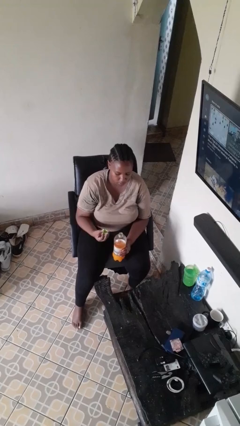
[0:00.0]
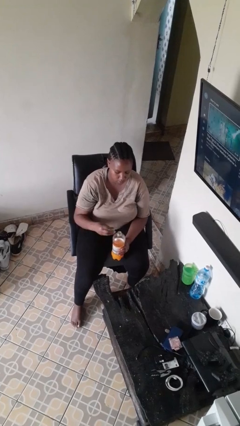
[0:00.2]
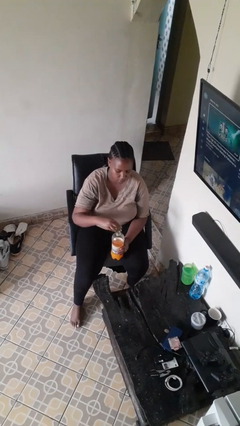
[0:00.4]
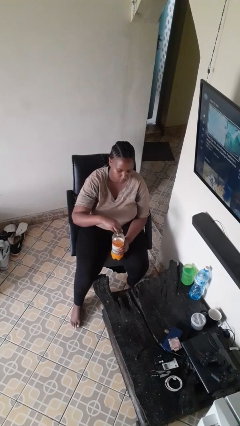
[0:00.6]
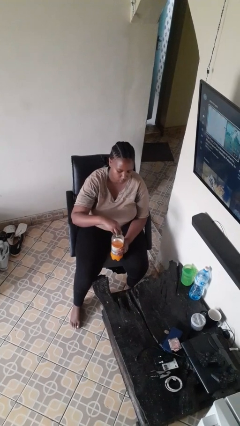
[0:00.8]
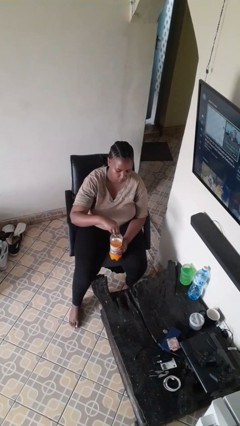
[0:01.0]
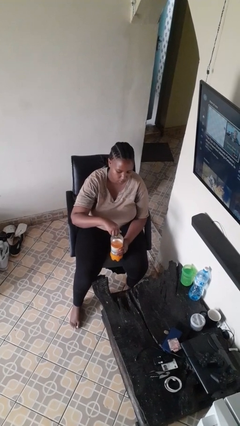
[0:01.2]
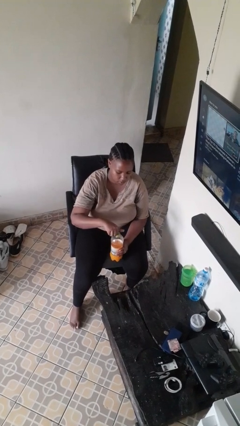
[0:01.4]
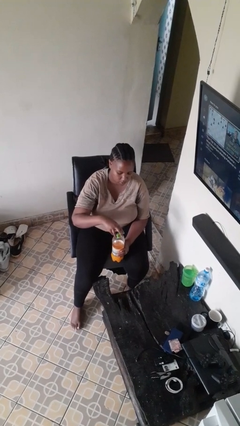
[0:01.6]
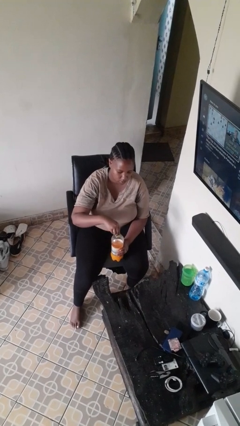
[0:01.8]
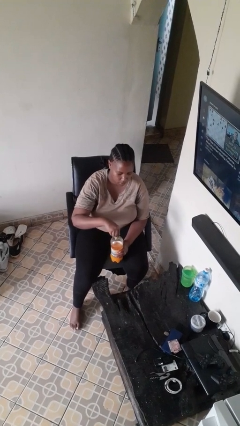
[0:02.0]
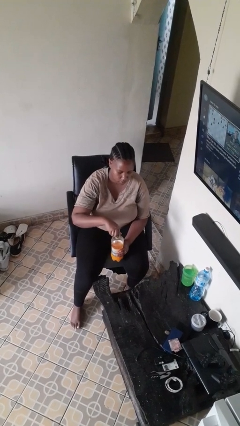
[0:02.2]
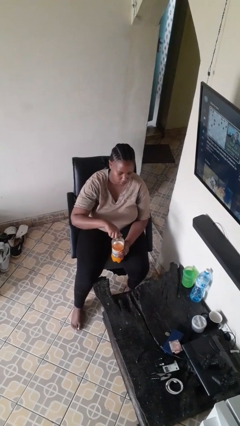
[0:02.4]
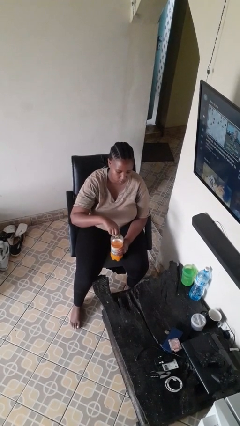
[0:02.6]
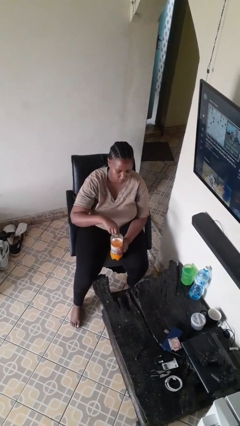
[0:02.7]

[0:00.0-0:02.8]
person screws lid to bottle

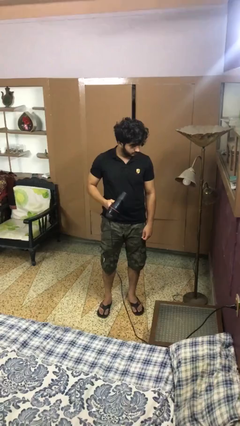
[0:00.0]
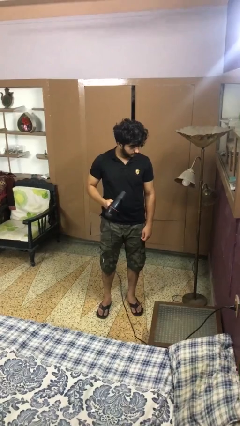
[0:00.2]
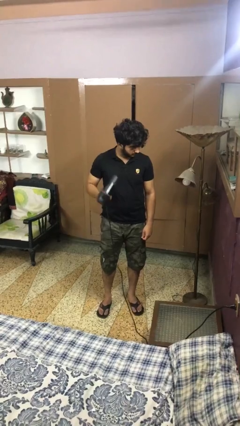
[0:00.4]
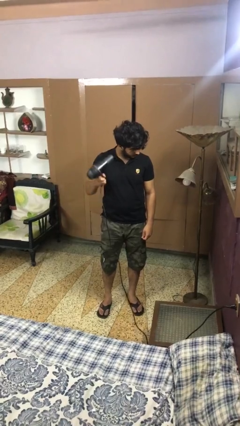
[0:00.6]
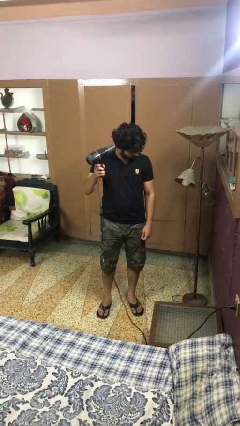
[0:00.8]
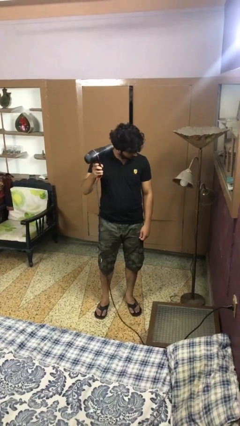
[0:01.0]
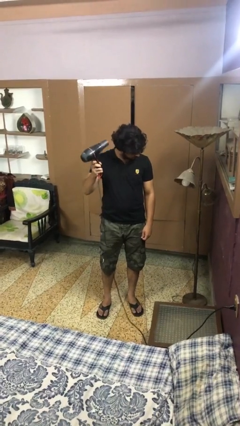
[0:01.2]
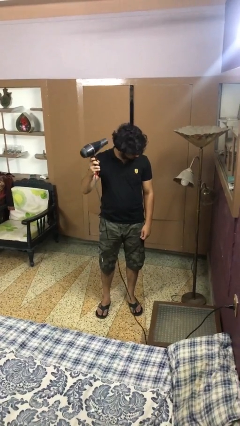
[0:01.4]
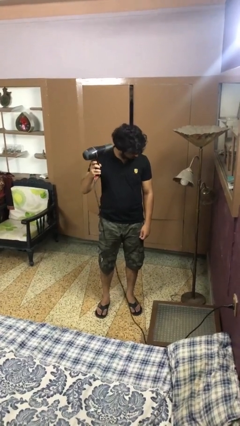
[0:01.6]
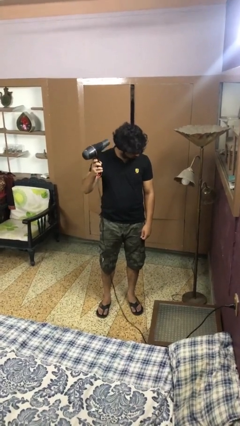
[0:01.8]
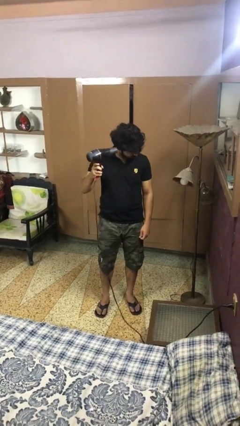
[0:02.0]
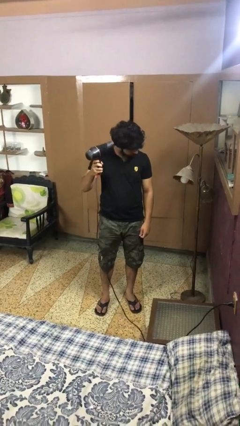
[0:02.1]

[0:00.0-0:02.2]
person dries hair with hairdryer

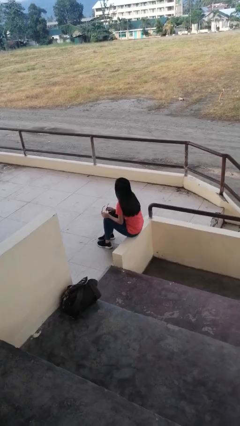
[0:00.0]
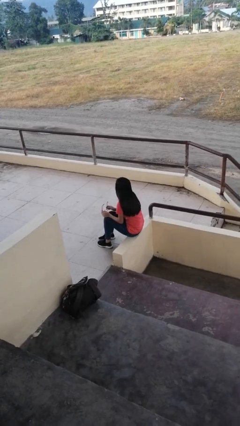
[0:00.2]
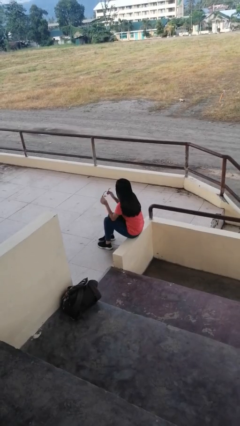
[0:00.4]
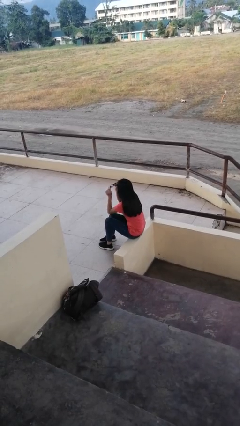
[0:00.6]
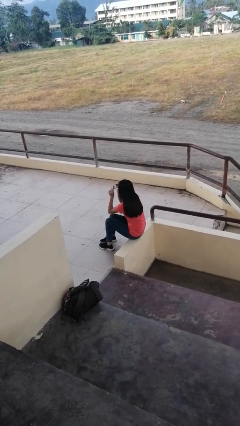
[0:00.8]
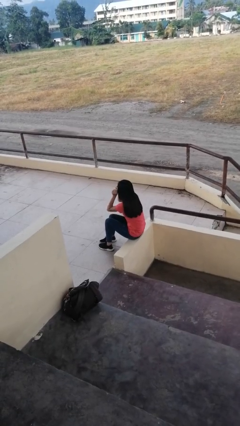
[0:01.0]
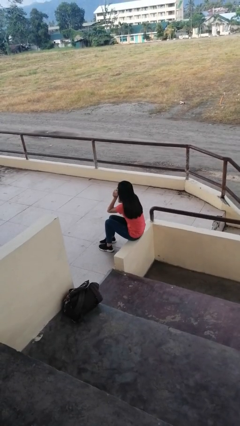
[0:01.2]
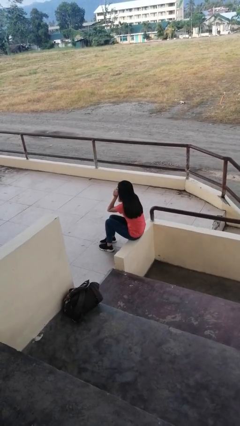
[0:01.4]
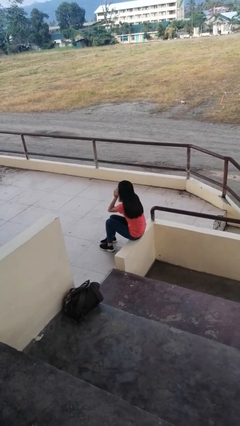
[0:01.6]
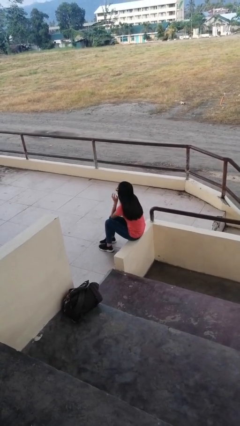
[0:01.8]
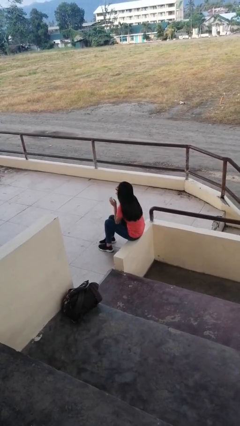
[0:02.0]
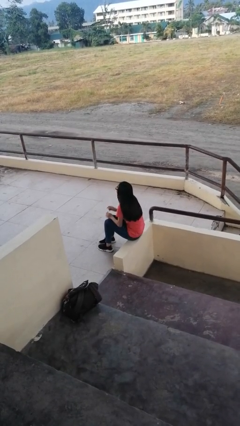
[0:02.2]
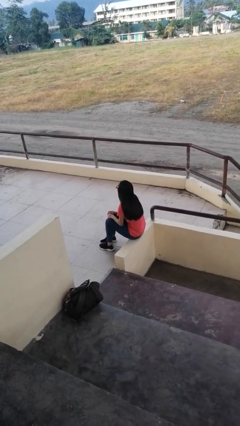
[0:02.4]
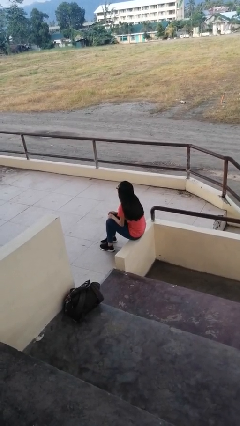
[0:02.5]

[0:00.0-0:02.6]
person puts on glasses

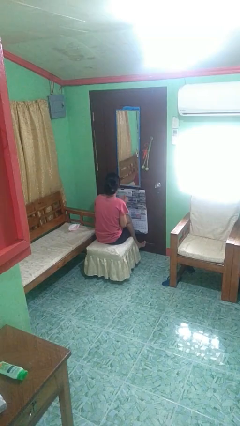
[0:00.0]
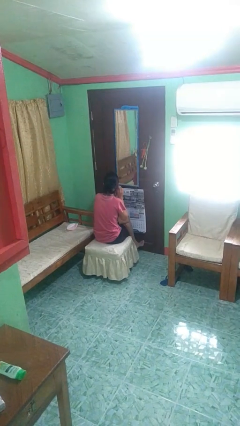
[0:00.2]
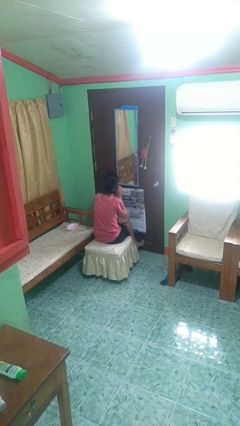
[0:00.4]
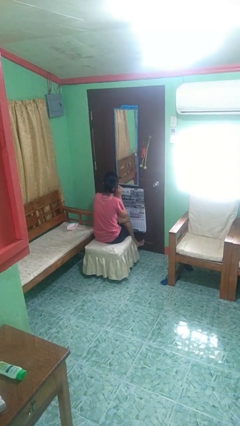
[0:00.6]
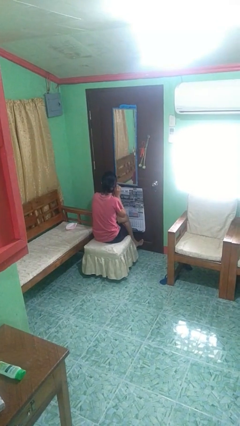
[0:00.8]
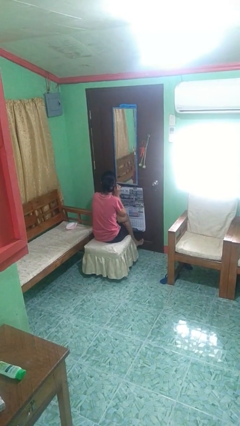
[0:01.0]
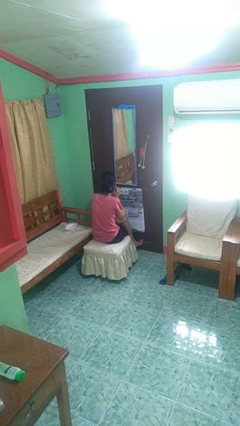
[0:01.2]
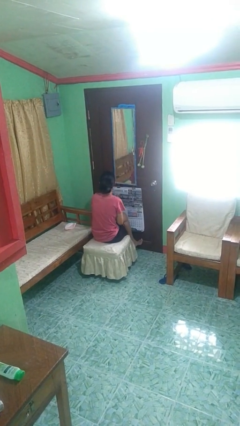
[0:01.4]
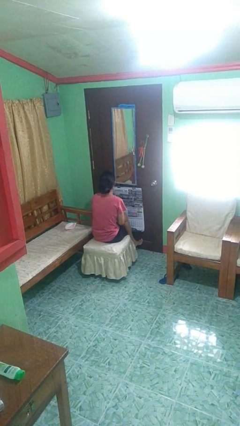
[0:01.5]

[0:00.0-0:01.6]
person puts on earrings

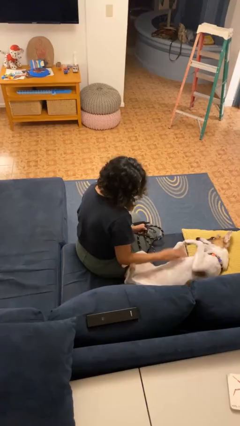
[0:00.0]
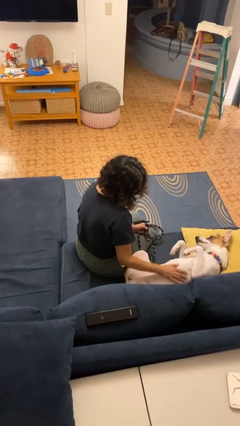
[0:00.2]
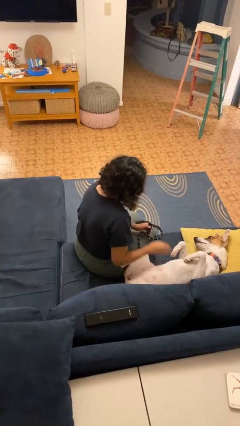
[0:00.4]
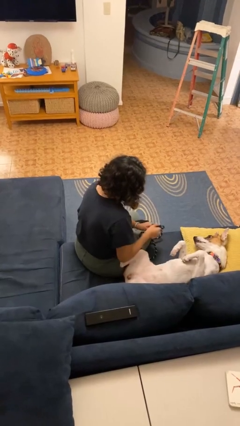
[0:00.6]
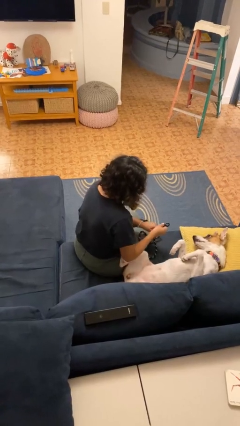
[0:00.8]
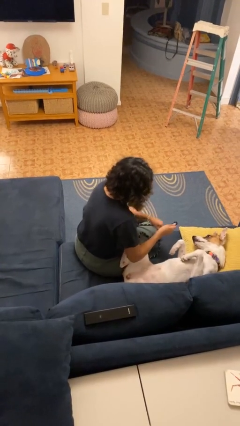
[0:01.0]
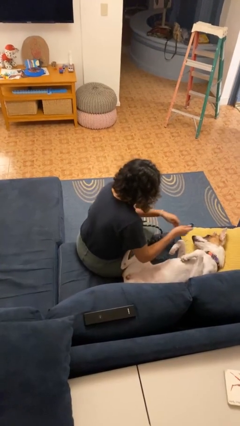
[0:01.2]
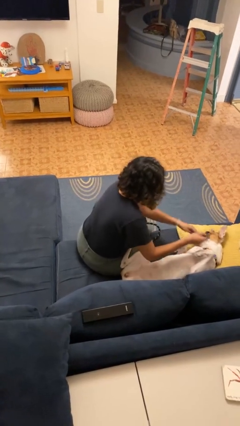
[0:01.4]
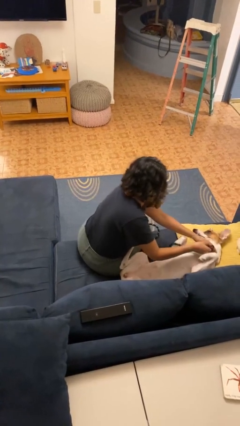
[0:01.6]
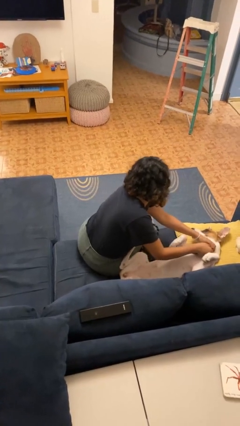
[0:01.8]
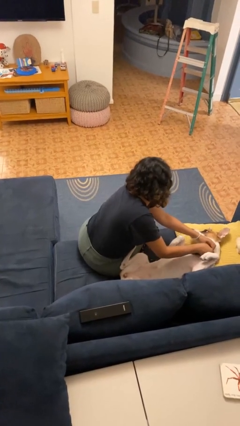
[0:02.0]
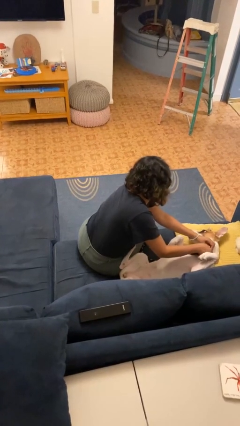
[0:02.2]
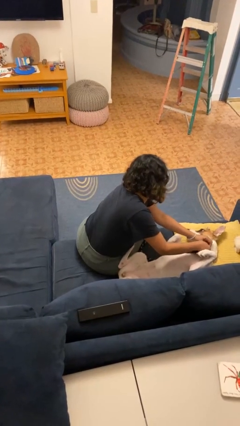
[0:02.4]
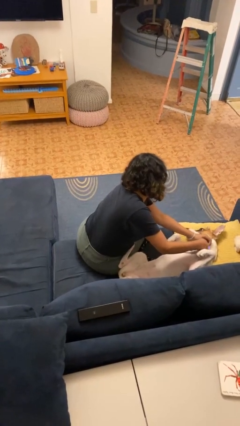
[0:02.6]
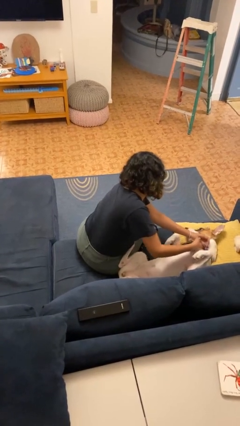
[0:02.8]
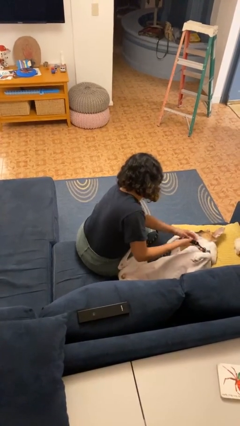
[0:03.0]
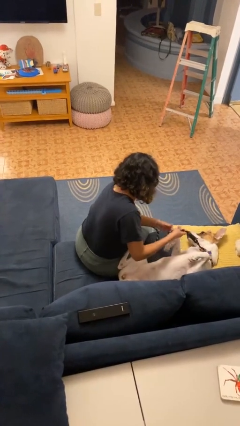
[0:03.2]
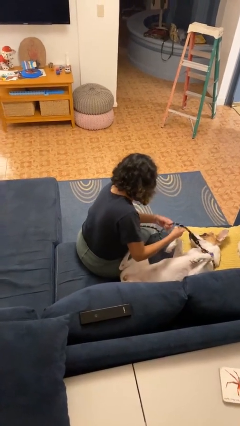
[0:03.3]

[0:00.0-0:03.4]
person attaches leash to dog

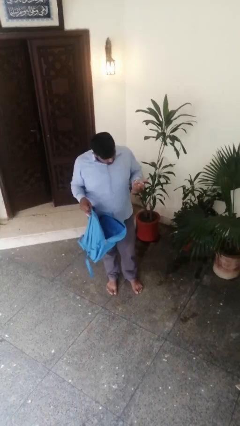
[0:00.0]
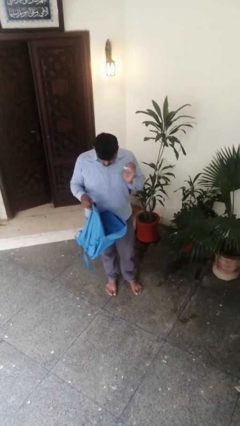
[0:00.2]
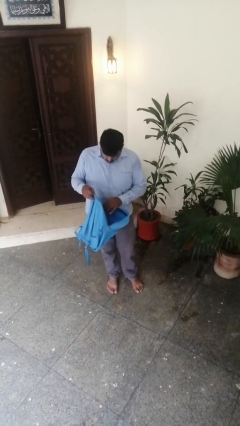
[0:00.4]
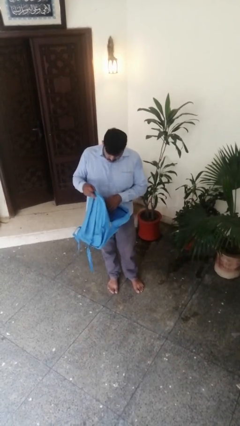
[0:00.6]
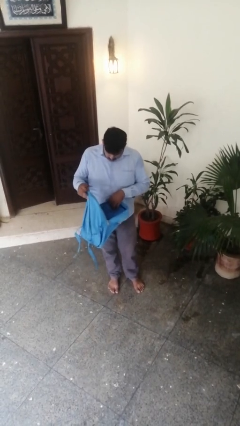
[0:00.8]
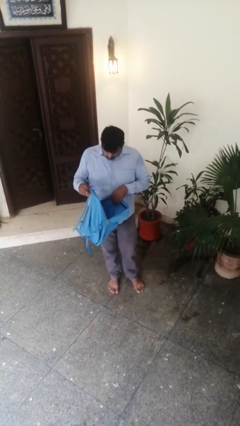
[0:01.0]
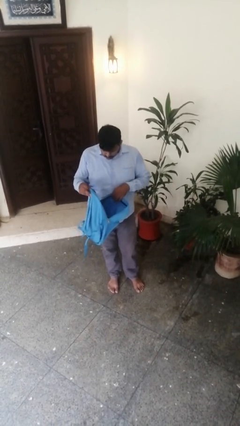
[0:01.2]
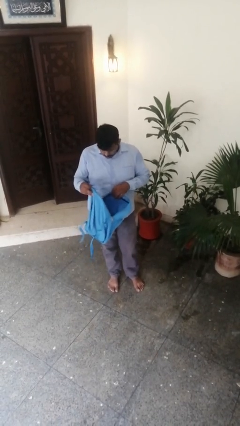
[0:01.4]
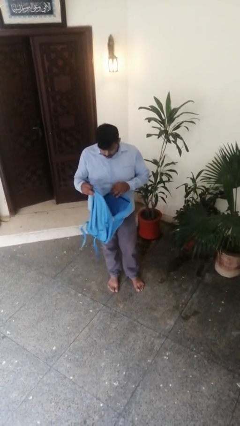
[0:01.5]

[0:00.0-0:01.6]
person puts object into backpack

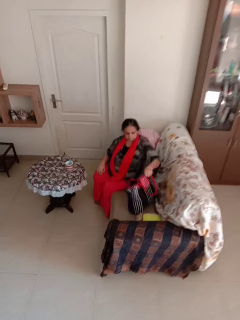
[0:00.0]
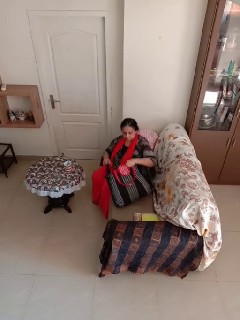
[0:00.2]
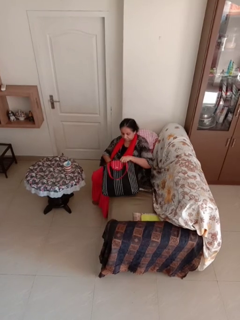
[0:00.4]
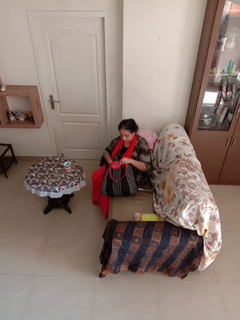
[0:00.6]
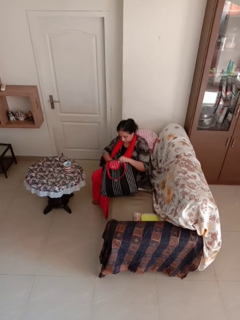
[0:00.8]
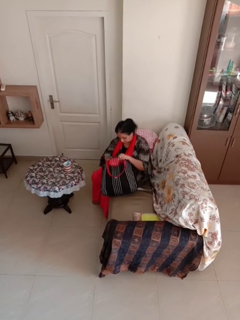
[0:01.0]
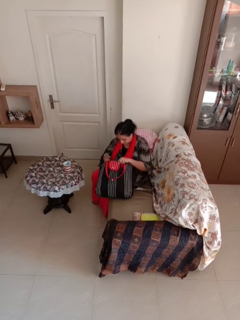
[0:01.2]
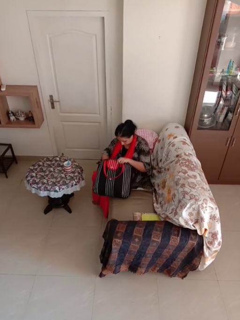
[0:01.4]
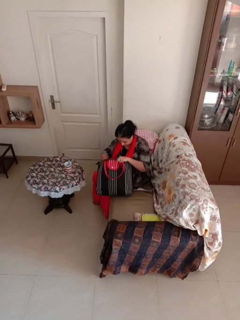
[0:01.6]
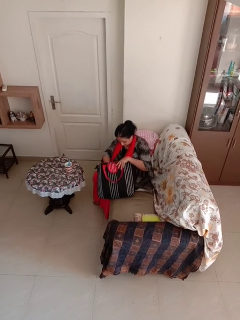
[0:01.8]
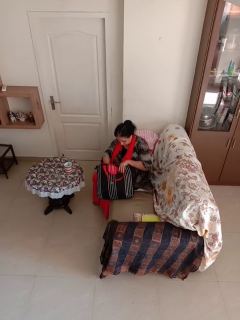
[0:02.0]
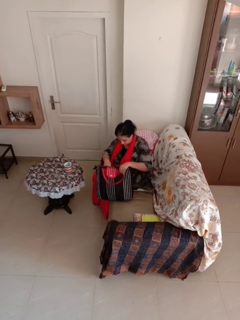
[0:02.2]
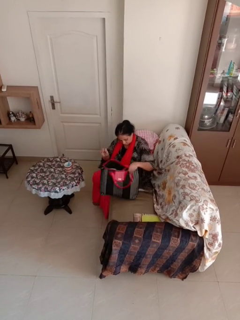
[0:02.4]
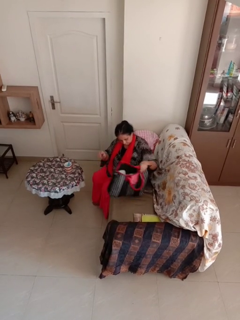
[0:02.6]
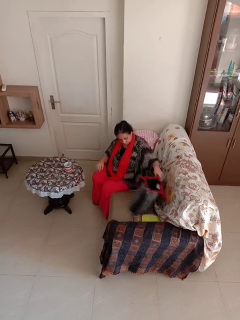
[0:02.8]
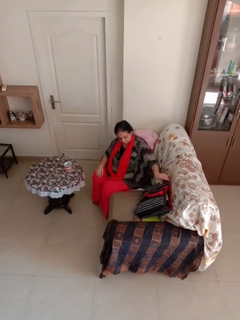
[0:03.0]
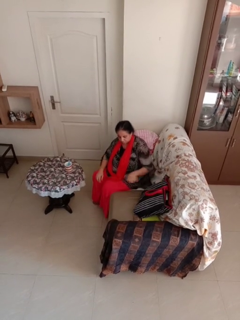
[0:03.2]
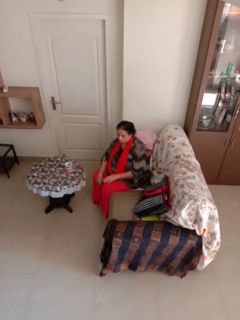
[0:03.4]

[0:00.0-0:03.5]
person searches in bag

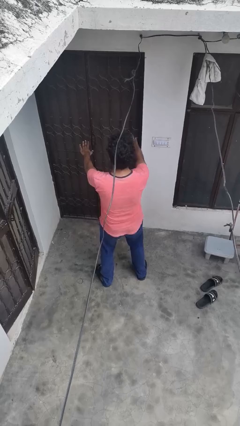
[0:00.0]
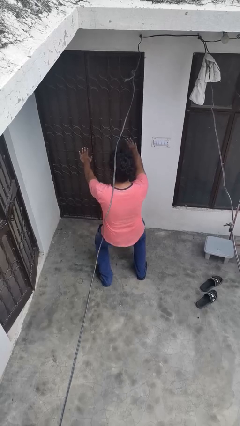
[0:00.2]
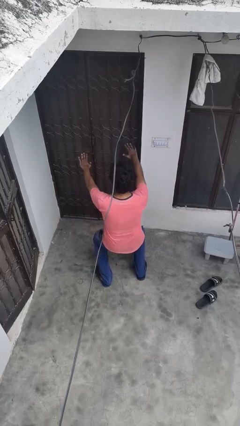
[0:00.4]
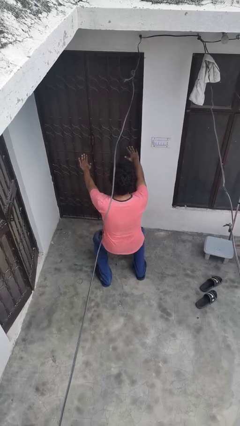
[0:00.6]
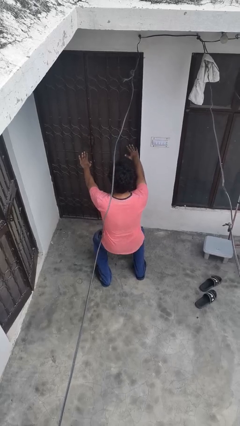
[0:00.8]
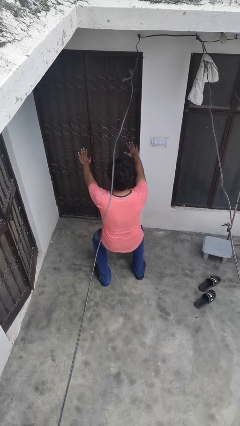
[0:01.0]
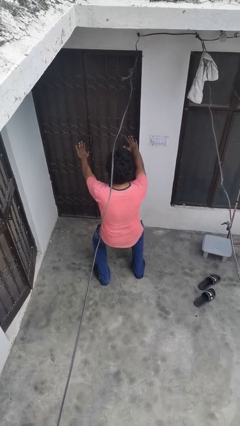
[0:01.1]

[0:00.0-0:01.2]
person squats
